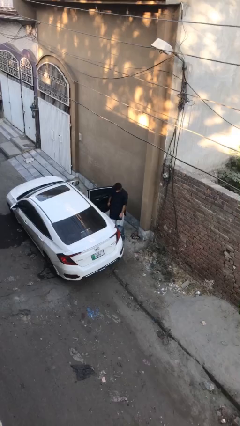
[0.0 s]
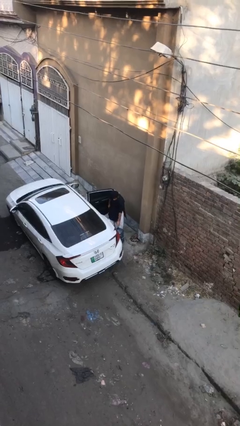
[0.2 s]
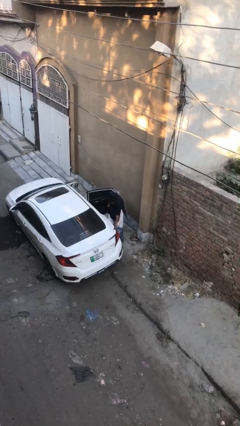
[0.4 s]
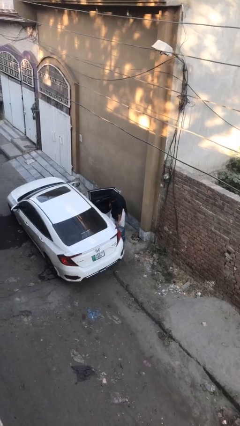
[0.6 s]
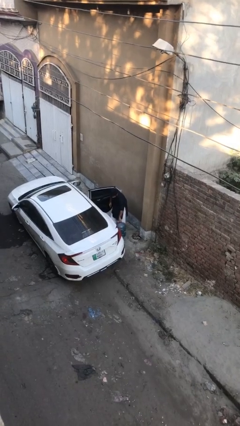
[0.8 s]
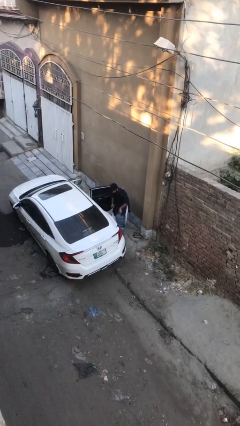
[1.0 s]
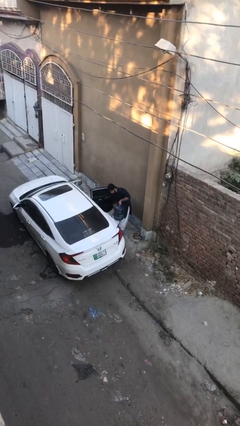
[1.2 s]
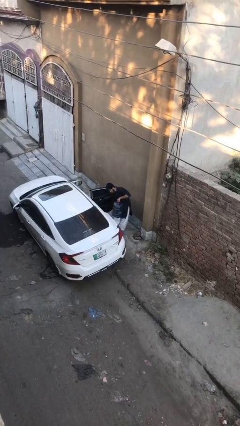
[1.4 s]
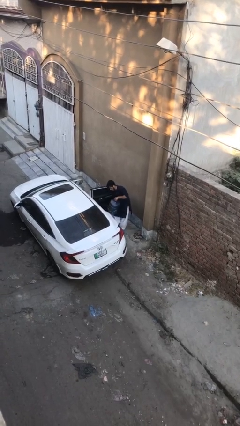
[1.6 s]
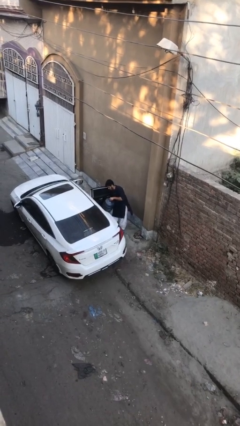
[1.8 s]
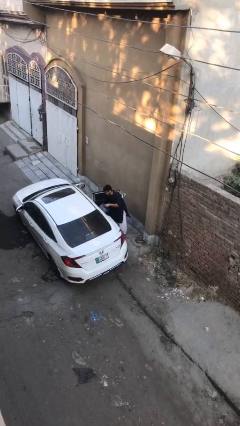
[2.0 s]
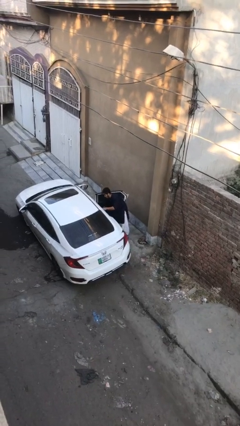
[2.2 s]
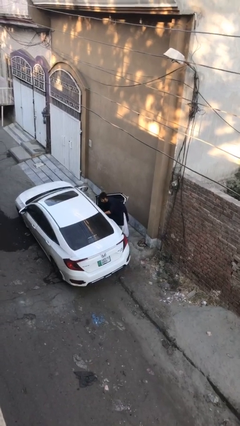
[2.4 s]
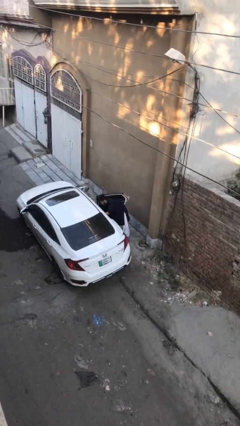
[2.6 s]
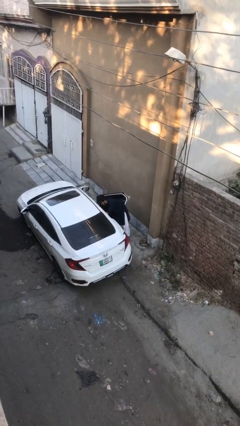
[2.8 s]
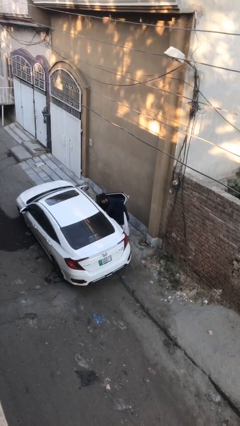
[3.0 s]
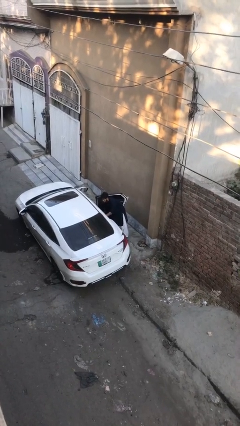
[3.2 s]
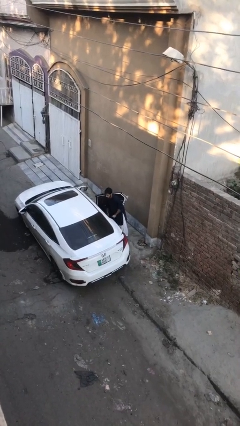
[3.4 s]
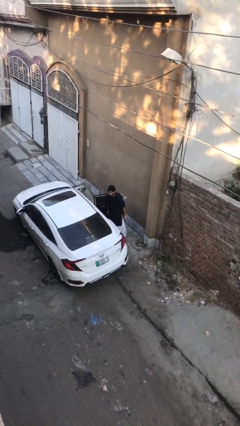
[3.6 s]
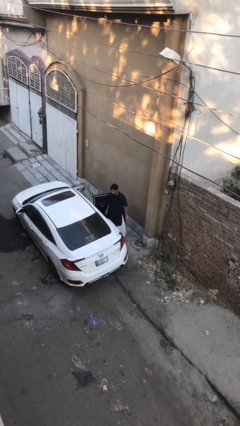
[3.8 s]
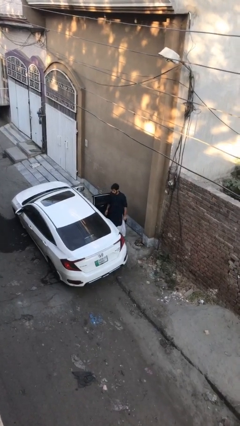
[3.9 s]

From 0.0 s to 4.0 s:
person loads car

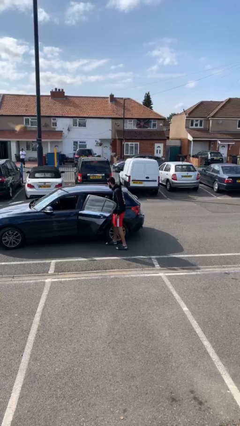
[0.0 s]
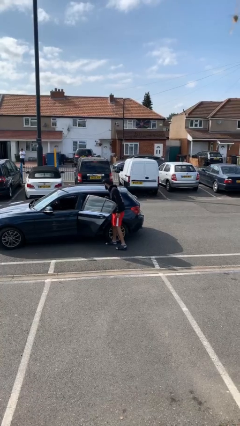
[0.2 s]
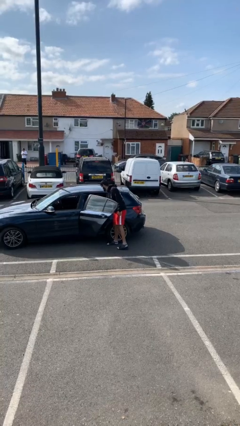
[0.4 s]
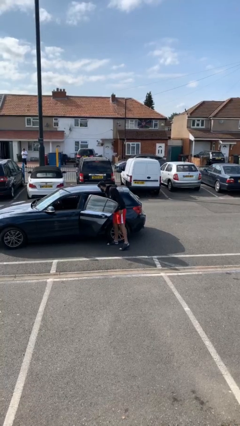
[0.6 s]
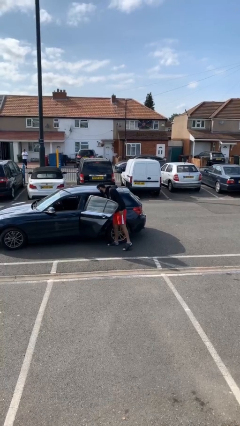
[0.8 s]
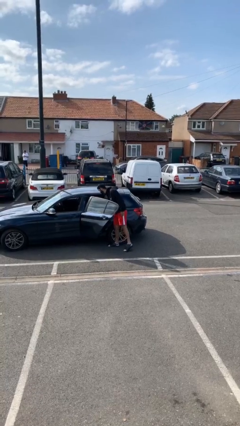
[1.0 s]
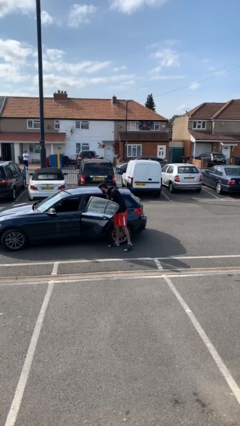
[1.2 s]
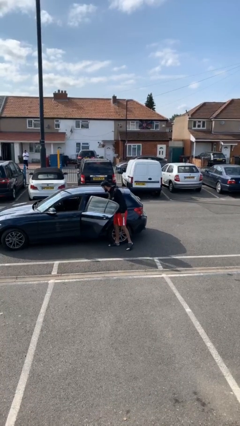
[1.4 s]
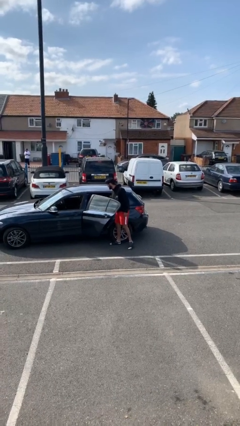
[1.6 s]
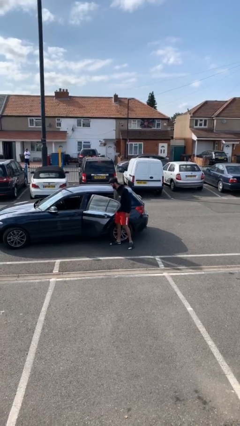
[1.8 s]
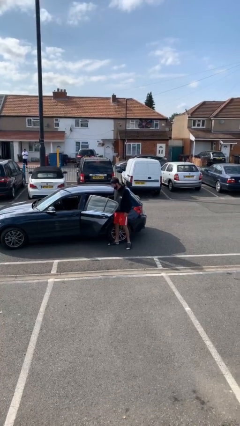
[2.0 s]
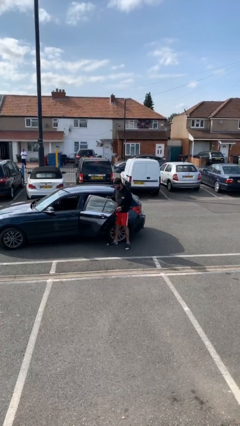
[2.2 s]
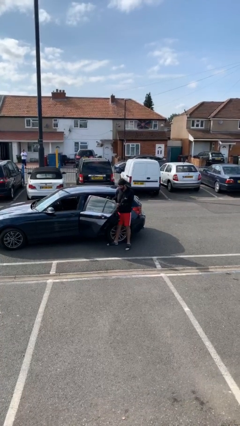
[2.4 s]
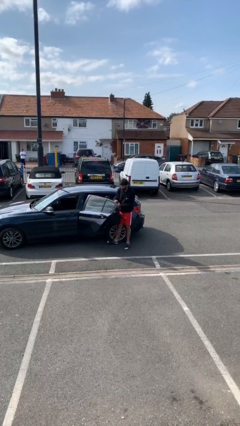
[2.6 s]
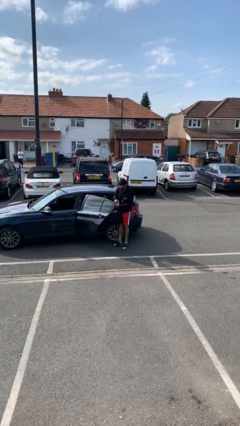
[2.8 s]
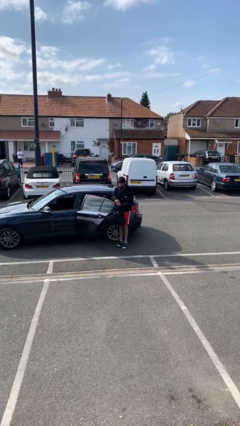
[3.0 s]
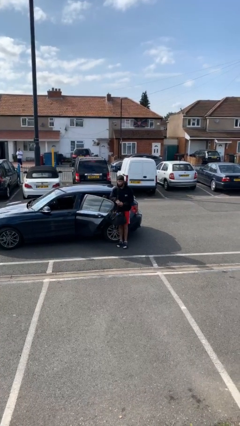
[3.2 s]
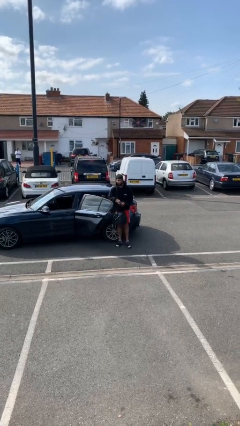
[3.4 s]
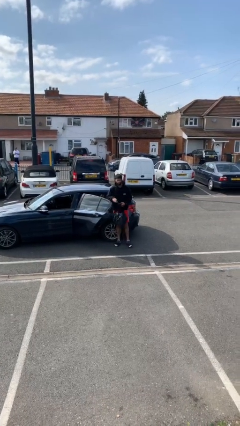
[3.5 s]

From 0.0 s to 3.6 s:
person unloads car

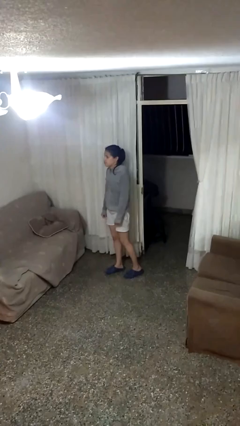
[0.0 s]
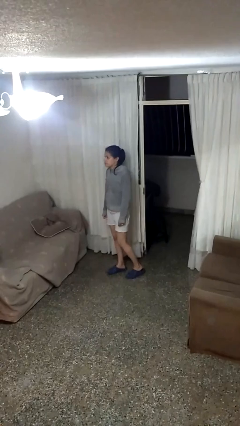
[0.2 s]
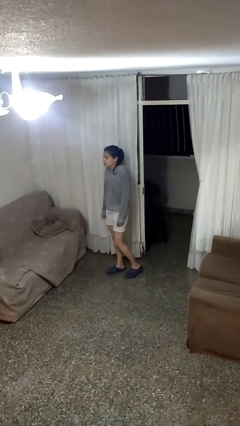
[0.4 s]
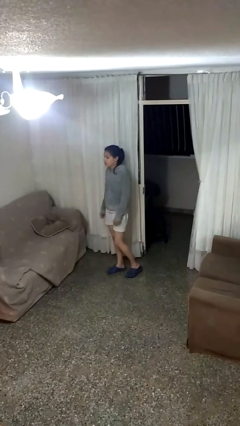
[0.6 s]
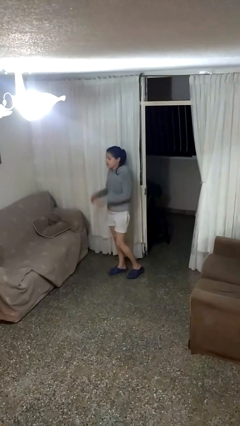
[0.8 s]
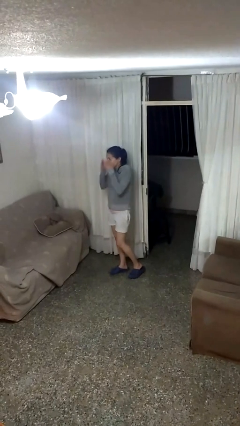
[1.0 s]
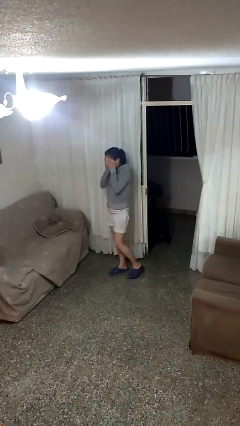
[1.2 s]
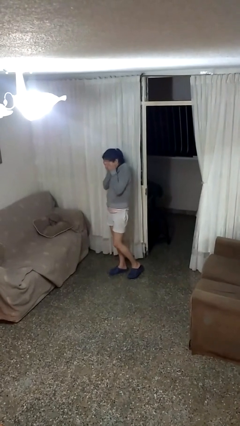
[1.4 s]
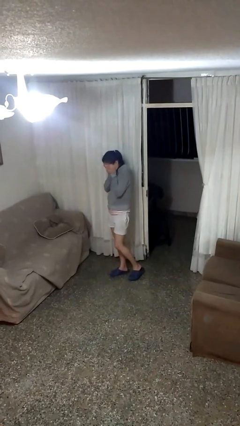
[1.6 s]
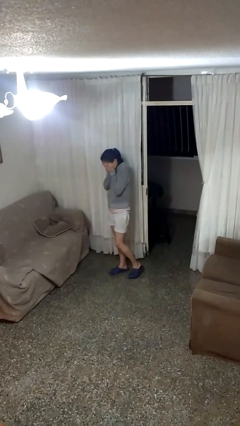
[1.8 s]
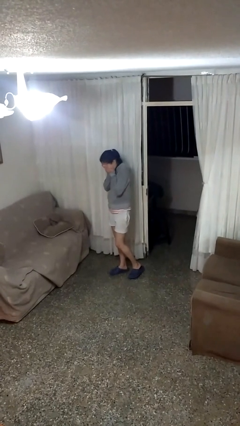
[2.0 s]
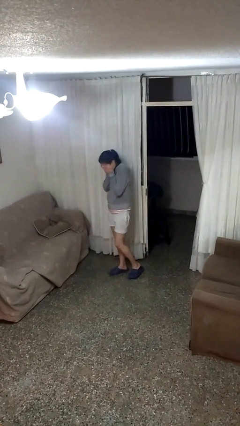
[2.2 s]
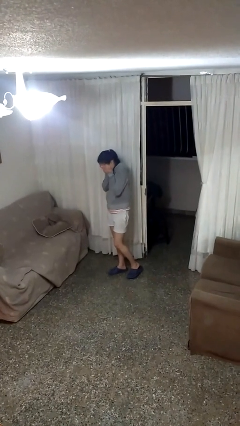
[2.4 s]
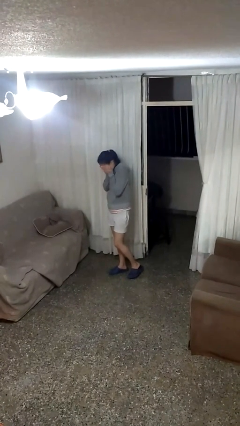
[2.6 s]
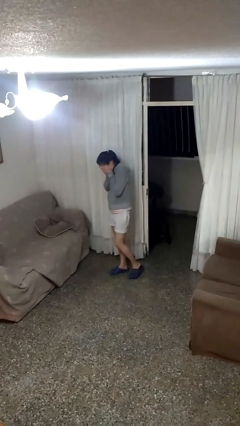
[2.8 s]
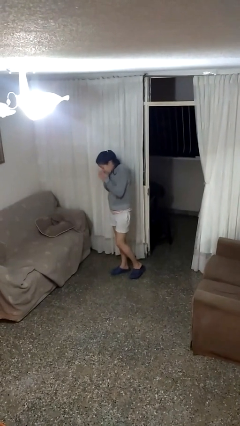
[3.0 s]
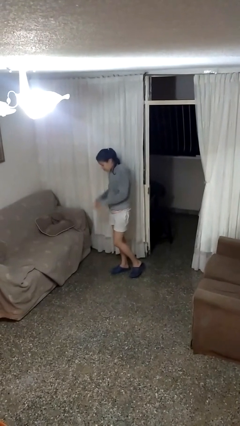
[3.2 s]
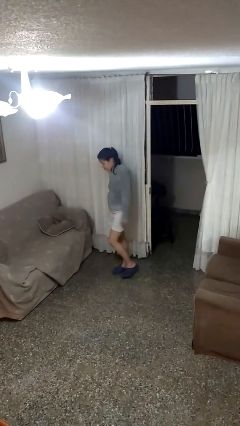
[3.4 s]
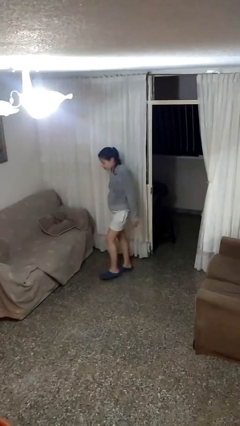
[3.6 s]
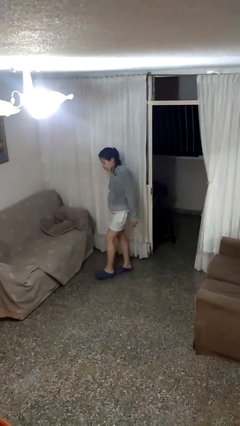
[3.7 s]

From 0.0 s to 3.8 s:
person covers face with hands

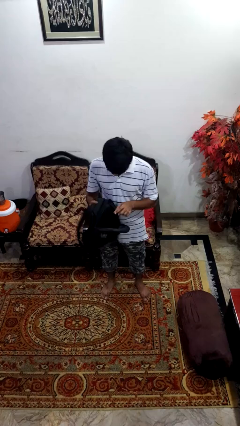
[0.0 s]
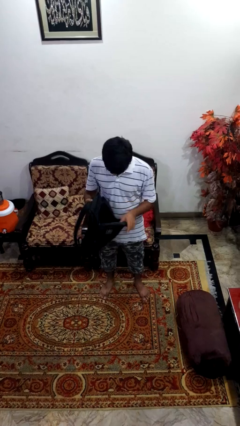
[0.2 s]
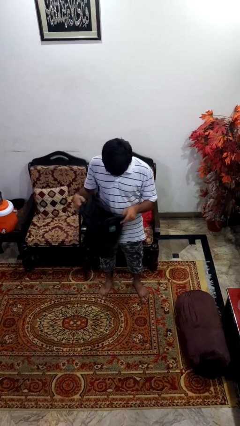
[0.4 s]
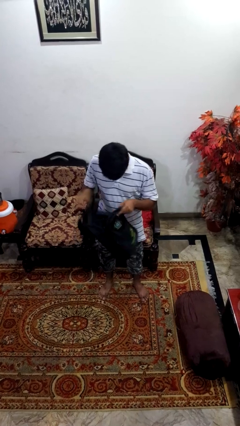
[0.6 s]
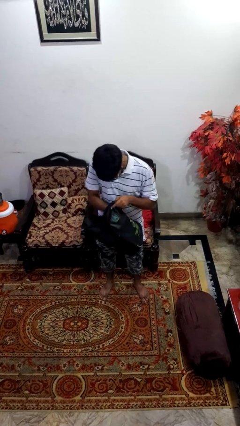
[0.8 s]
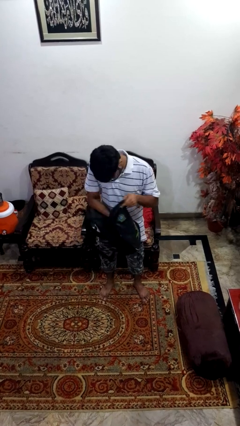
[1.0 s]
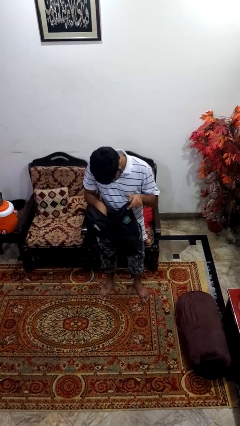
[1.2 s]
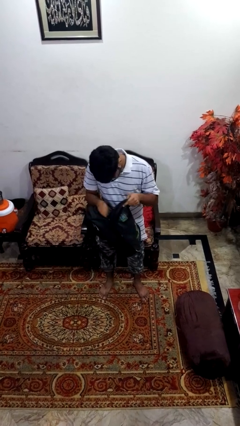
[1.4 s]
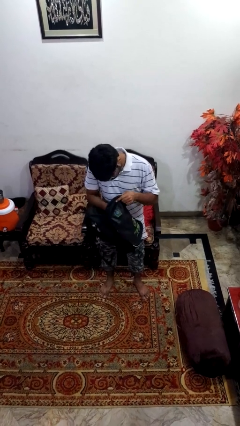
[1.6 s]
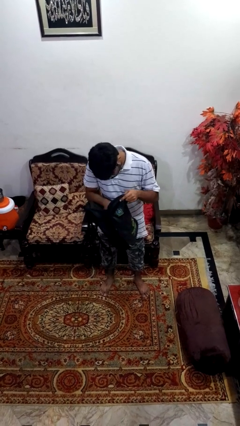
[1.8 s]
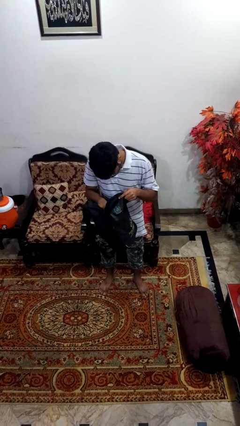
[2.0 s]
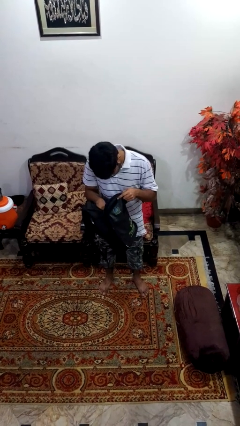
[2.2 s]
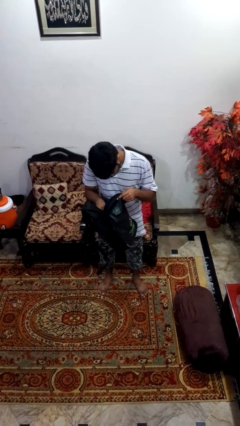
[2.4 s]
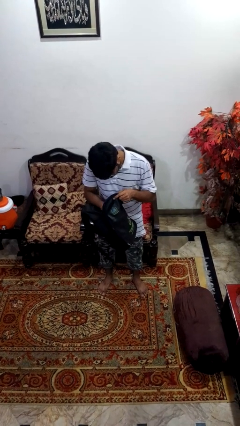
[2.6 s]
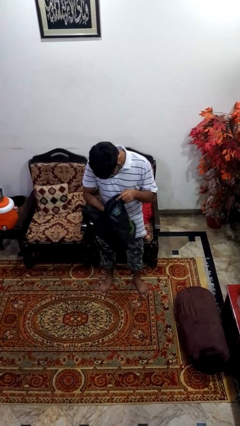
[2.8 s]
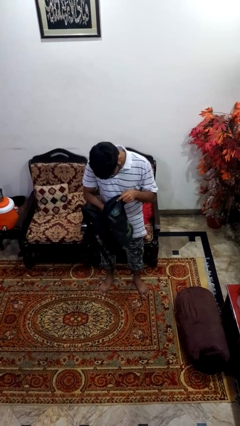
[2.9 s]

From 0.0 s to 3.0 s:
person searches in backpack

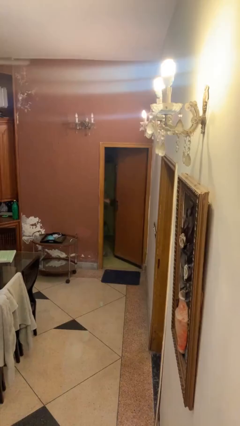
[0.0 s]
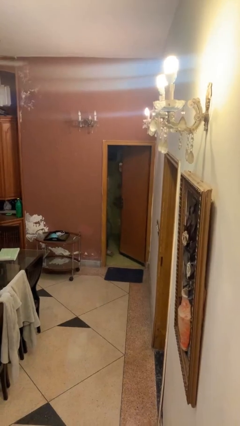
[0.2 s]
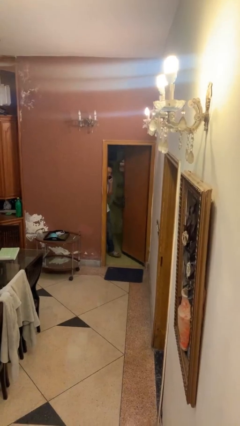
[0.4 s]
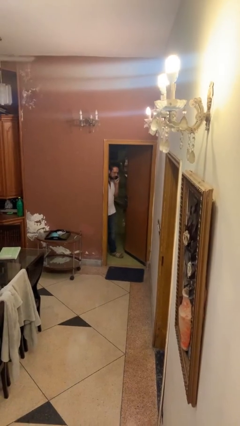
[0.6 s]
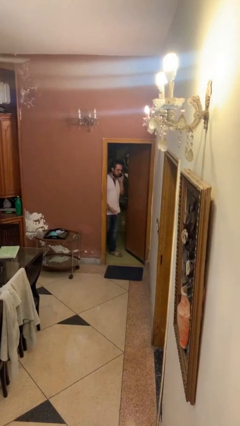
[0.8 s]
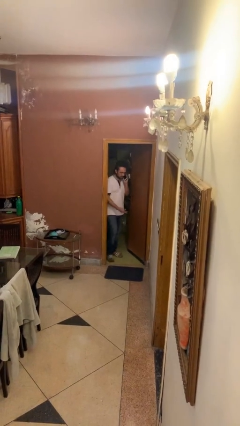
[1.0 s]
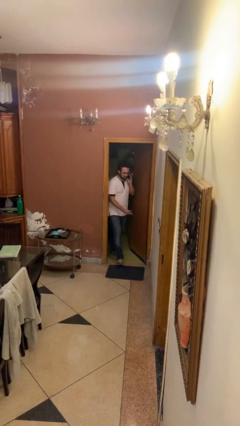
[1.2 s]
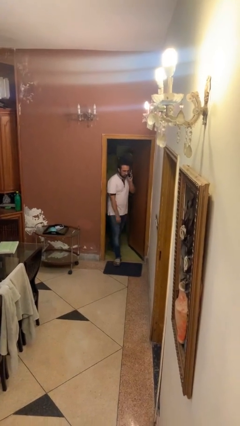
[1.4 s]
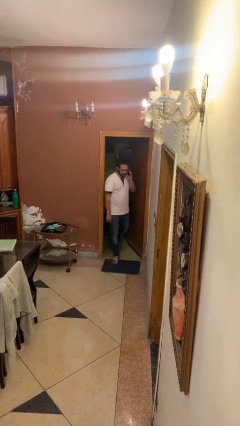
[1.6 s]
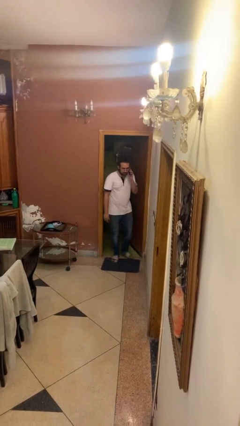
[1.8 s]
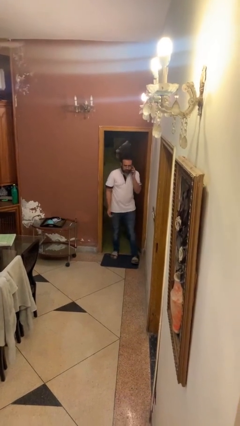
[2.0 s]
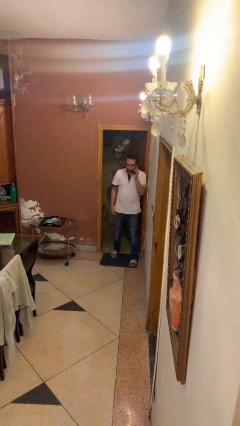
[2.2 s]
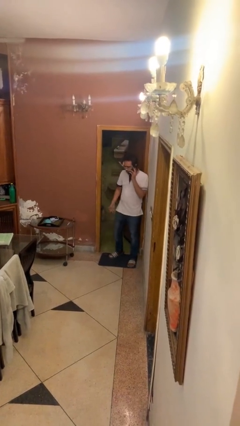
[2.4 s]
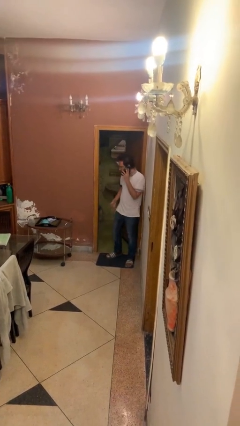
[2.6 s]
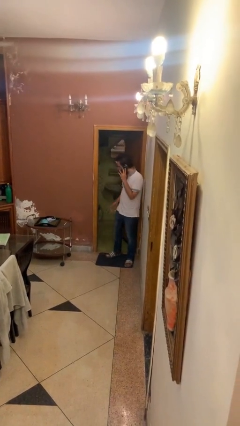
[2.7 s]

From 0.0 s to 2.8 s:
person enters scene through structure
